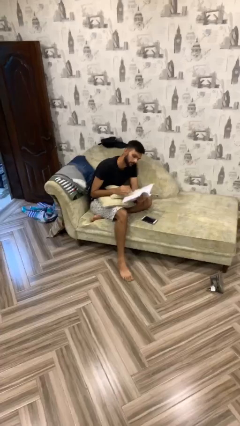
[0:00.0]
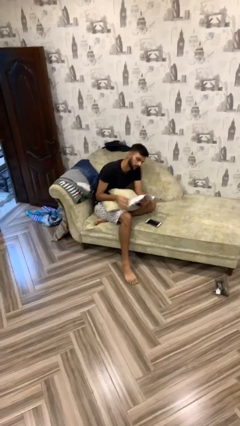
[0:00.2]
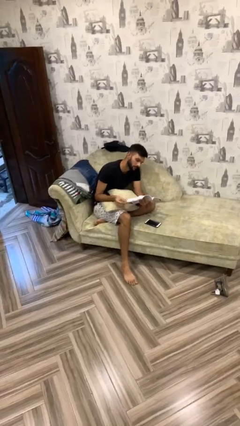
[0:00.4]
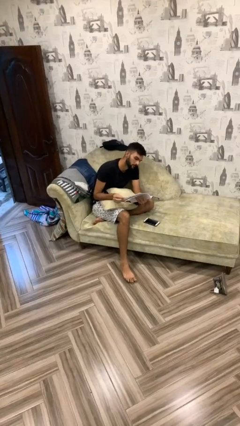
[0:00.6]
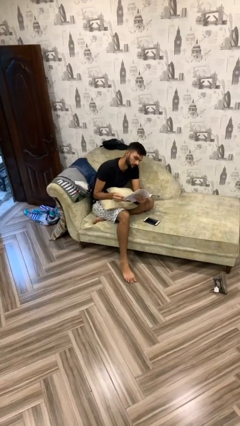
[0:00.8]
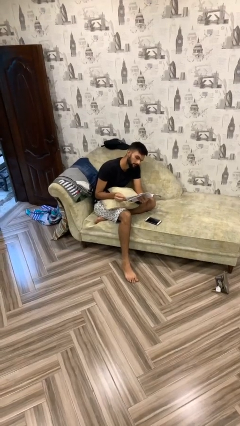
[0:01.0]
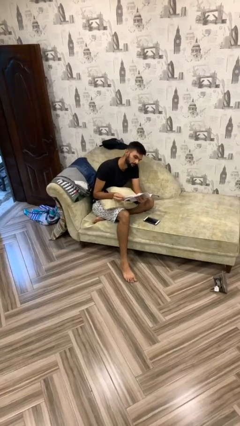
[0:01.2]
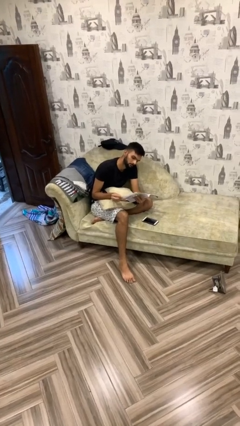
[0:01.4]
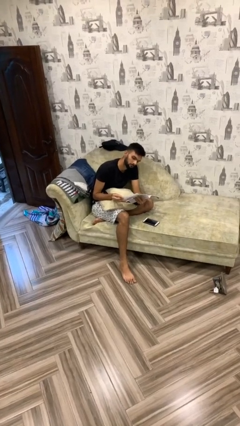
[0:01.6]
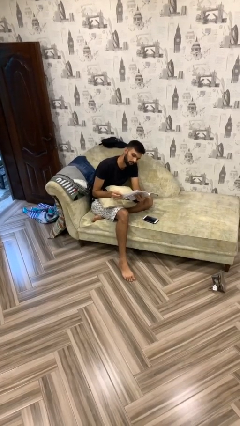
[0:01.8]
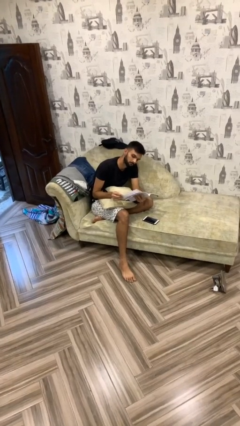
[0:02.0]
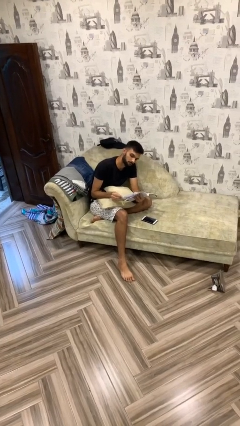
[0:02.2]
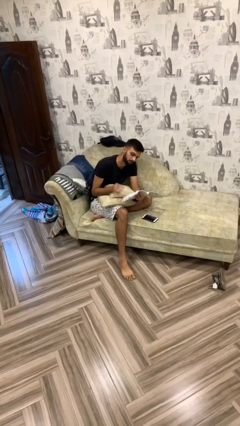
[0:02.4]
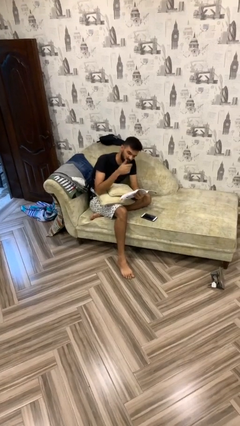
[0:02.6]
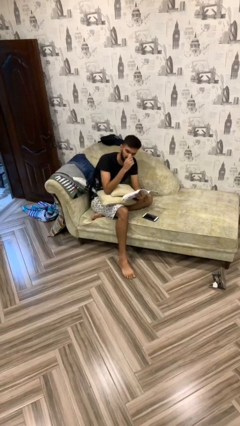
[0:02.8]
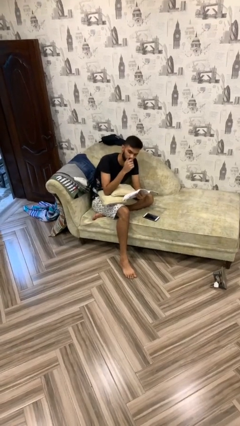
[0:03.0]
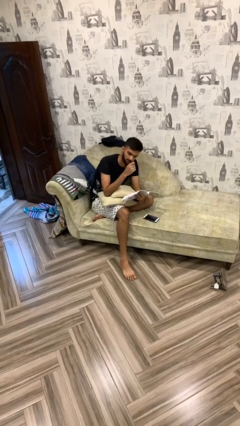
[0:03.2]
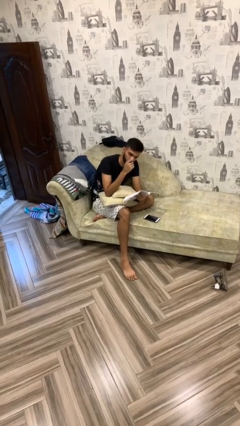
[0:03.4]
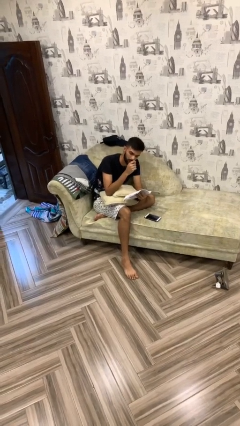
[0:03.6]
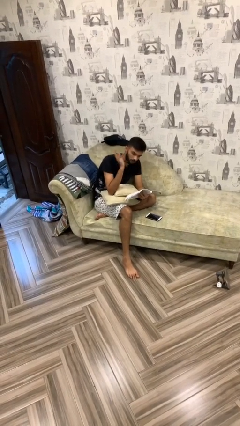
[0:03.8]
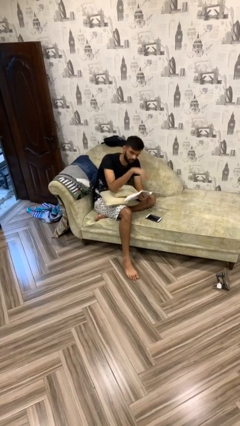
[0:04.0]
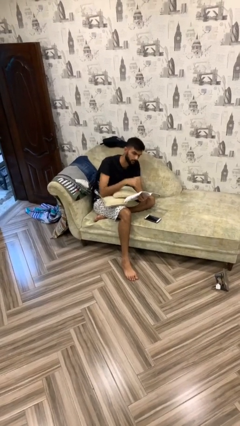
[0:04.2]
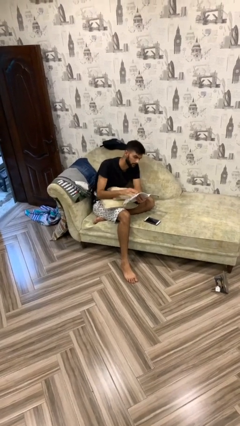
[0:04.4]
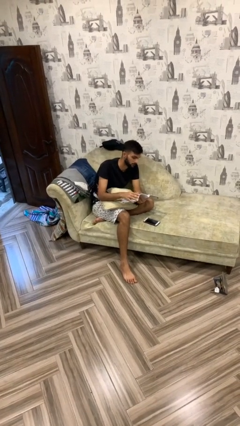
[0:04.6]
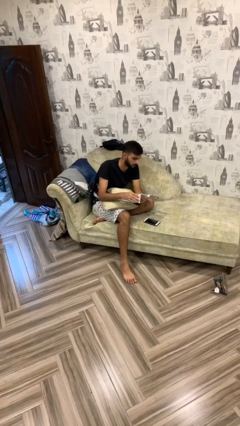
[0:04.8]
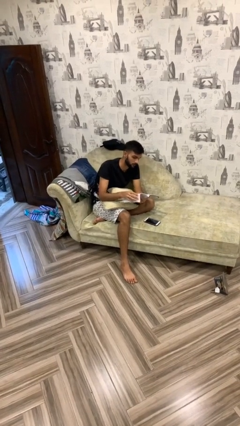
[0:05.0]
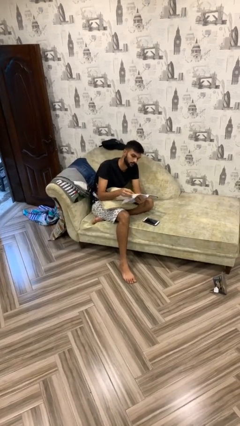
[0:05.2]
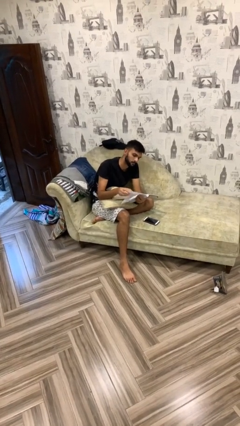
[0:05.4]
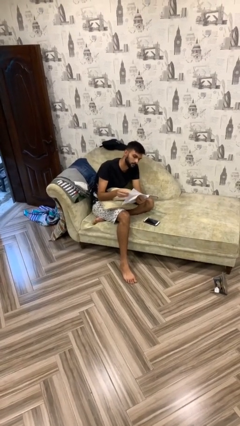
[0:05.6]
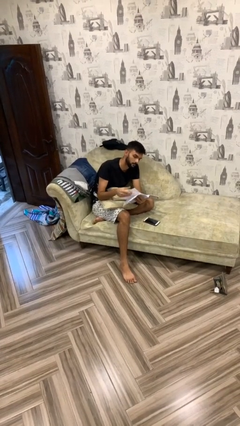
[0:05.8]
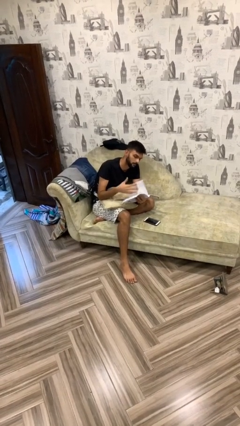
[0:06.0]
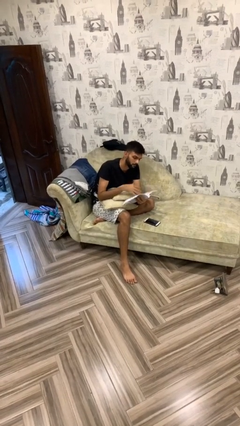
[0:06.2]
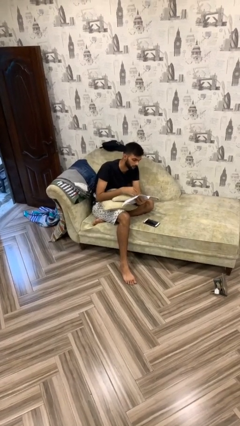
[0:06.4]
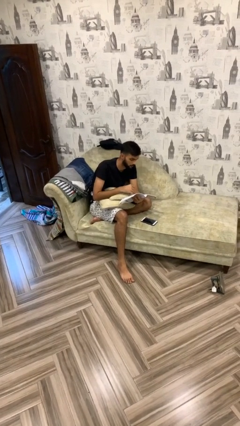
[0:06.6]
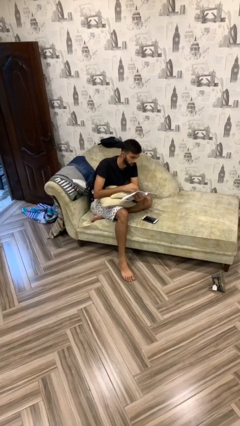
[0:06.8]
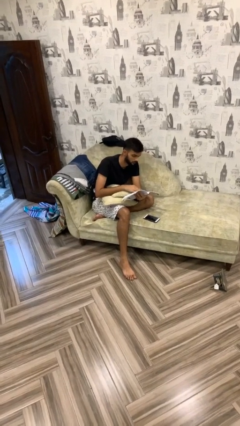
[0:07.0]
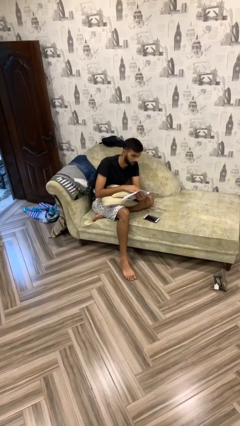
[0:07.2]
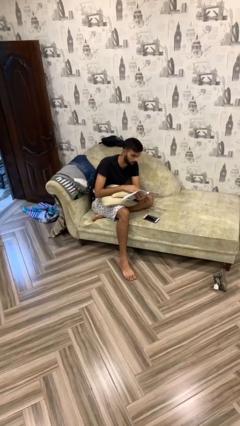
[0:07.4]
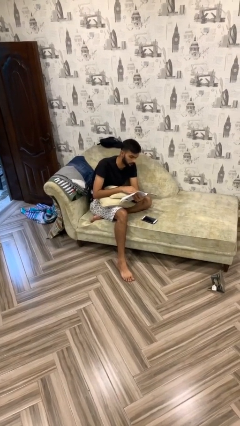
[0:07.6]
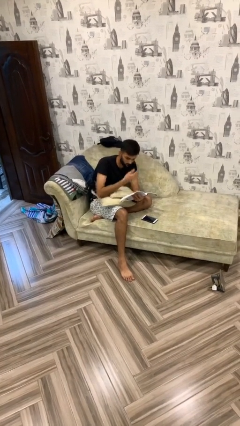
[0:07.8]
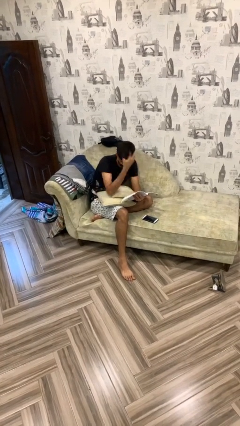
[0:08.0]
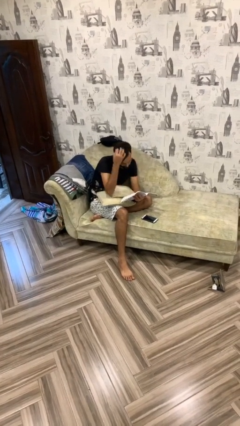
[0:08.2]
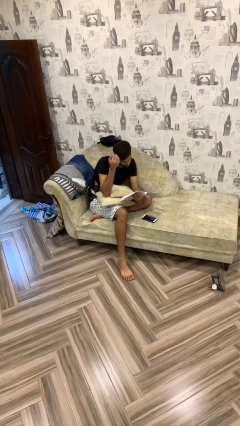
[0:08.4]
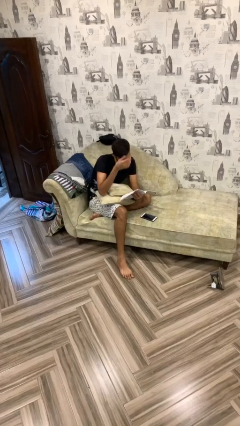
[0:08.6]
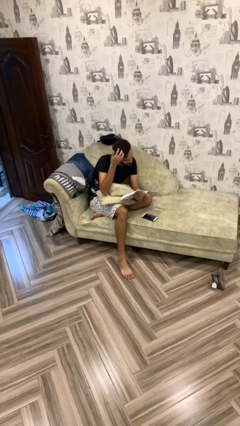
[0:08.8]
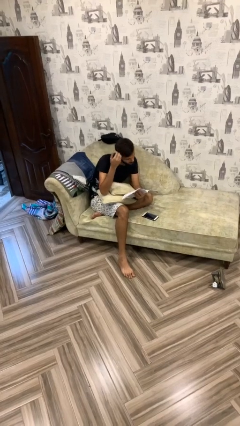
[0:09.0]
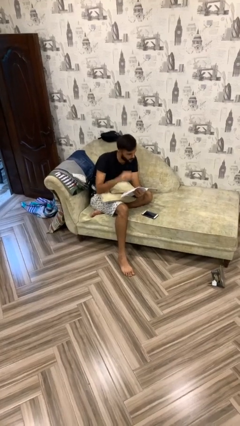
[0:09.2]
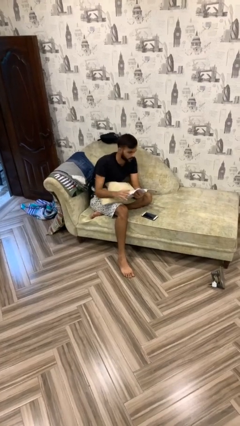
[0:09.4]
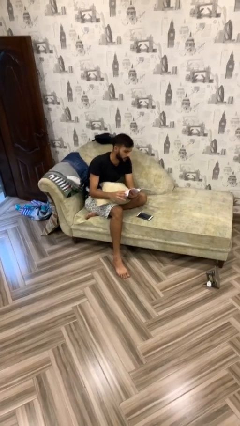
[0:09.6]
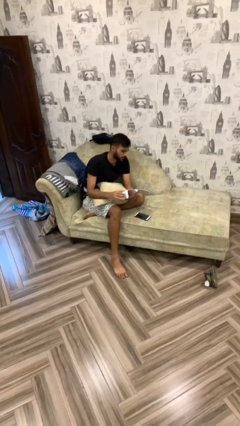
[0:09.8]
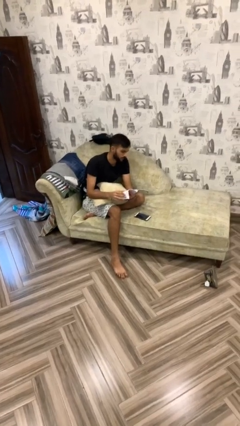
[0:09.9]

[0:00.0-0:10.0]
person reads document

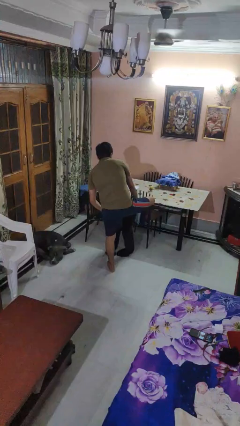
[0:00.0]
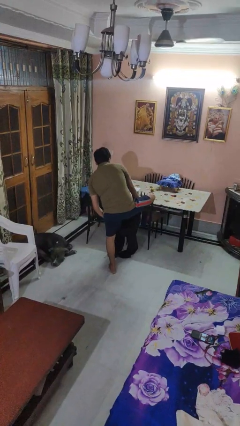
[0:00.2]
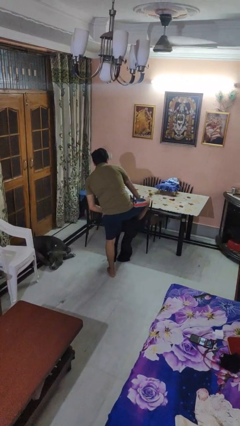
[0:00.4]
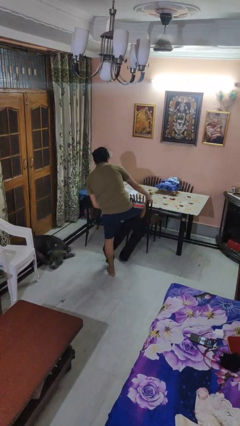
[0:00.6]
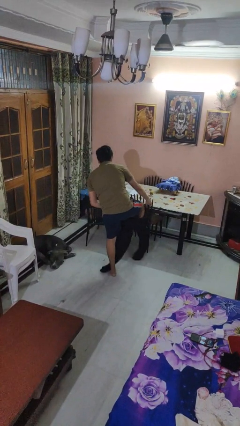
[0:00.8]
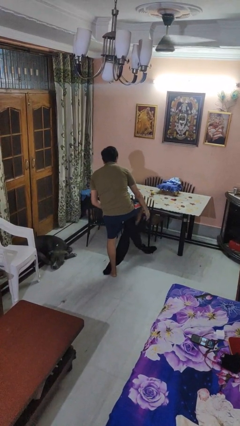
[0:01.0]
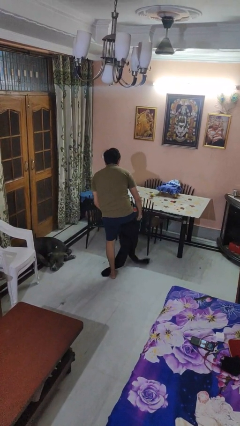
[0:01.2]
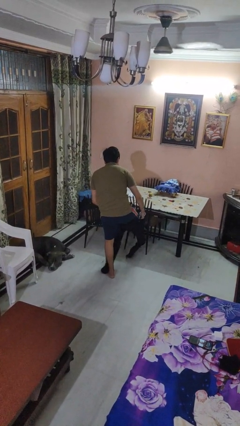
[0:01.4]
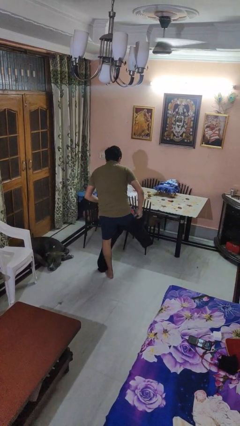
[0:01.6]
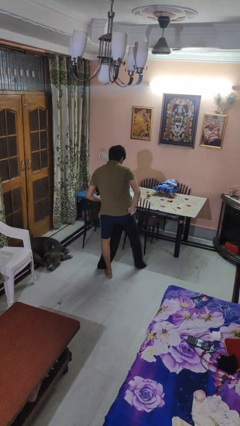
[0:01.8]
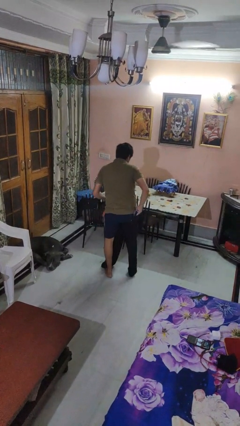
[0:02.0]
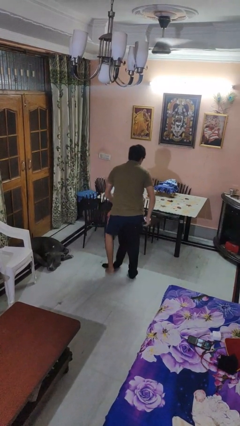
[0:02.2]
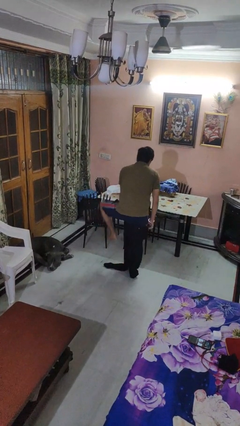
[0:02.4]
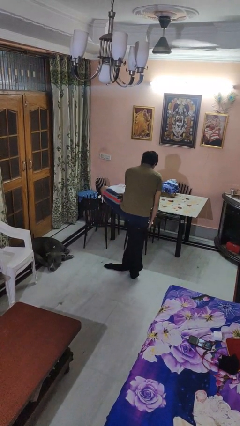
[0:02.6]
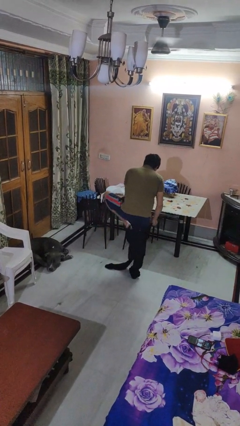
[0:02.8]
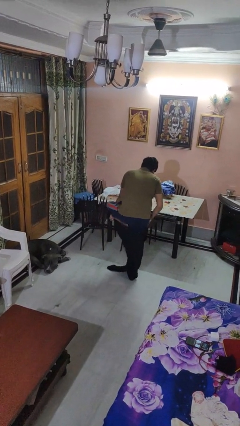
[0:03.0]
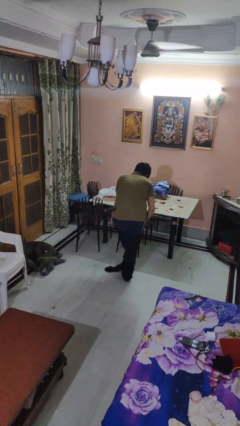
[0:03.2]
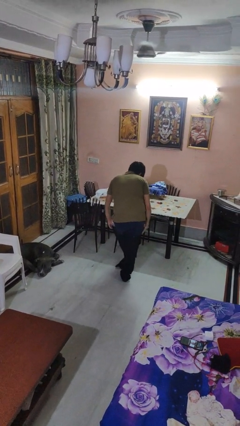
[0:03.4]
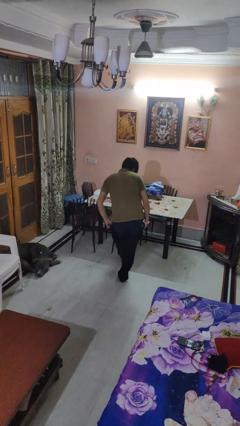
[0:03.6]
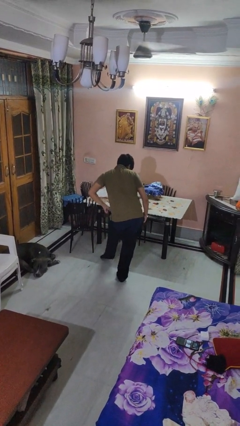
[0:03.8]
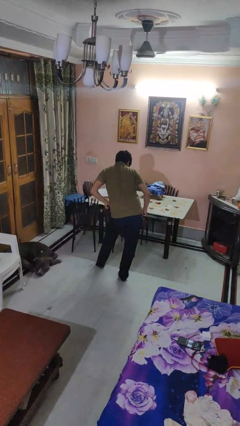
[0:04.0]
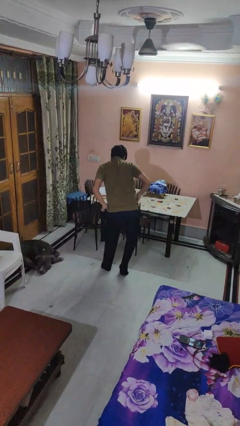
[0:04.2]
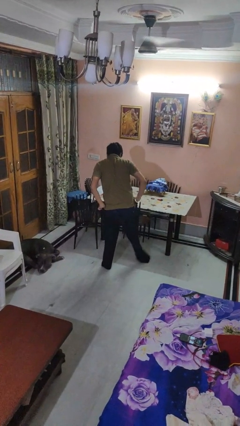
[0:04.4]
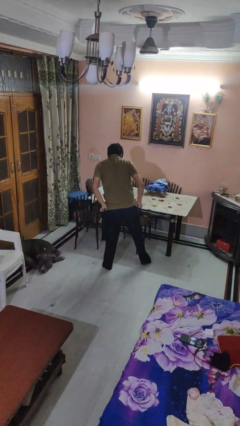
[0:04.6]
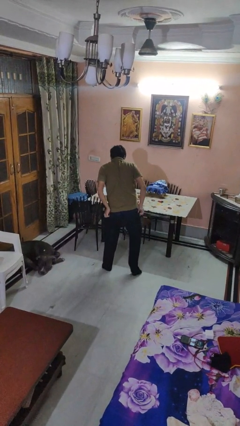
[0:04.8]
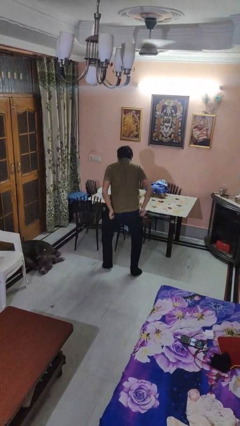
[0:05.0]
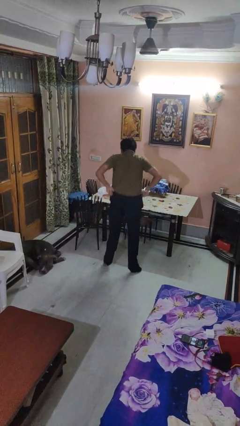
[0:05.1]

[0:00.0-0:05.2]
person puts on pants

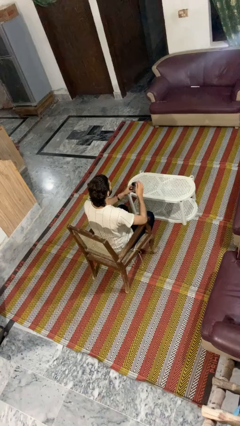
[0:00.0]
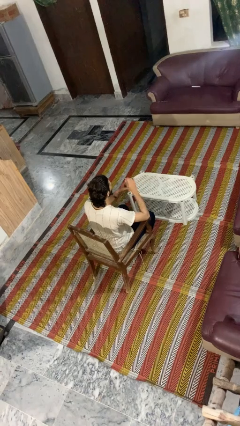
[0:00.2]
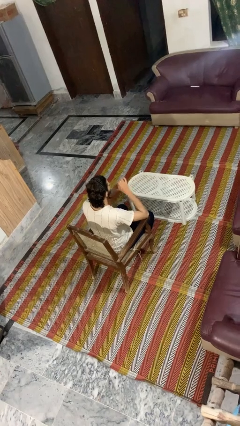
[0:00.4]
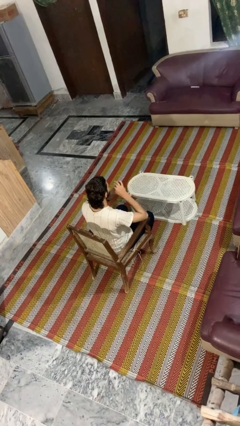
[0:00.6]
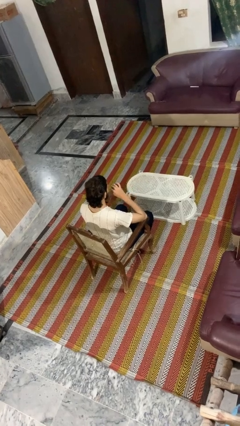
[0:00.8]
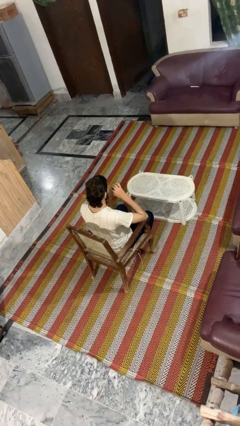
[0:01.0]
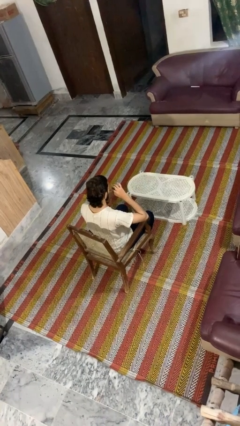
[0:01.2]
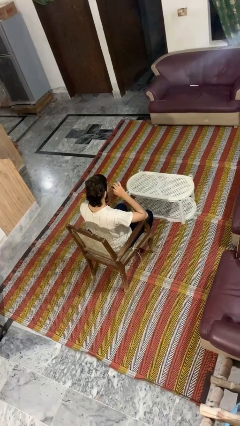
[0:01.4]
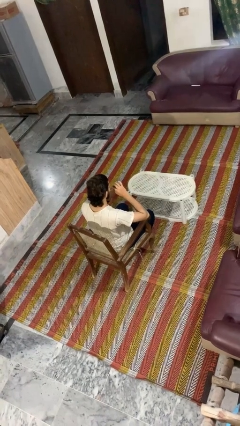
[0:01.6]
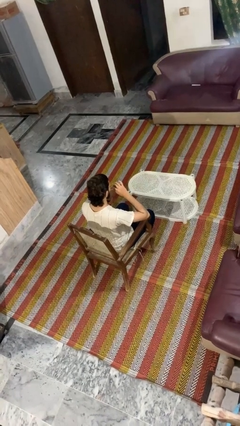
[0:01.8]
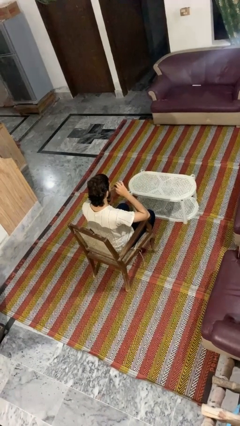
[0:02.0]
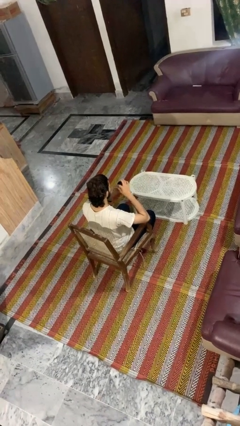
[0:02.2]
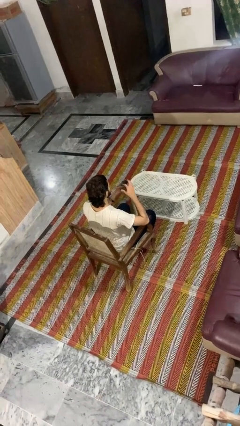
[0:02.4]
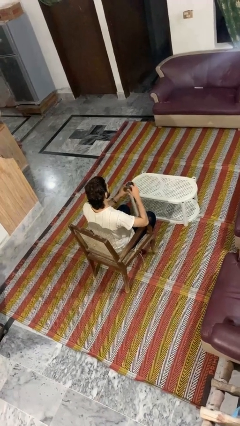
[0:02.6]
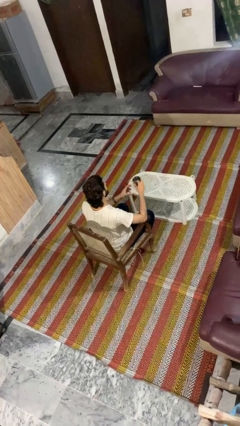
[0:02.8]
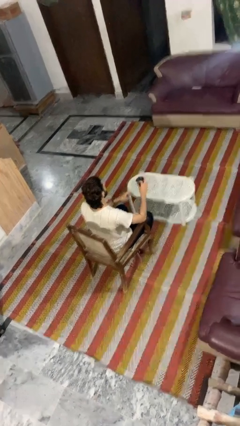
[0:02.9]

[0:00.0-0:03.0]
person drinks from straw
